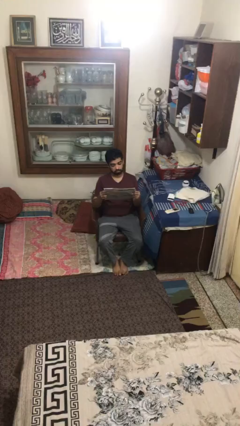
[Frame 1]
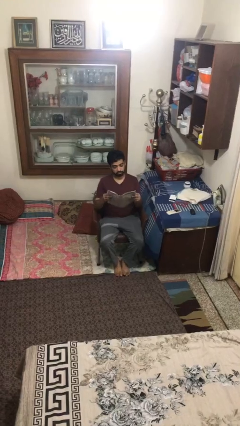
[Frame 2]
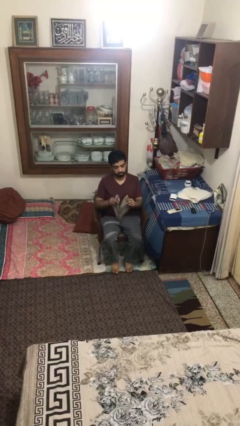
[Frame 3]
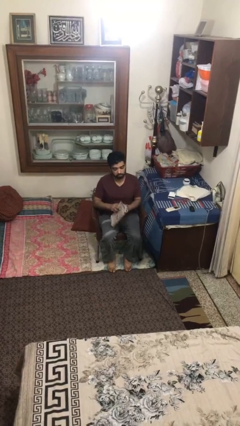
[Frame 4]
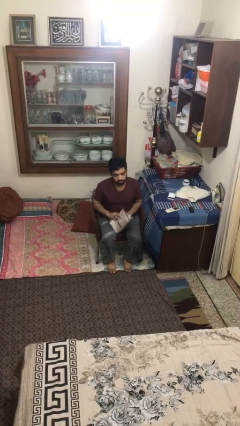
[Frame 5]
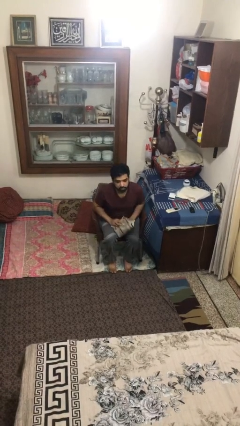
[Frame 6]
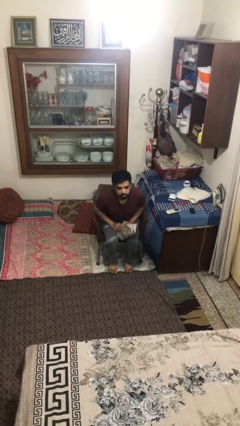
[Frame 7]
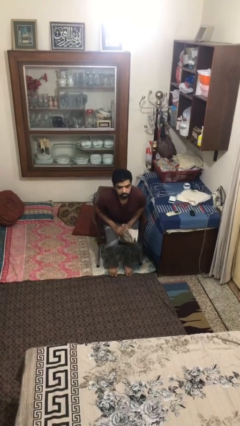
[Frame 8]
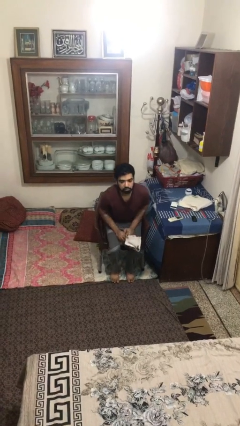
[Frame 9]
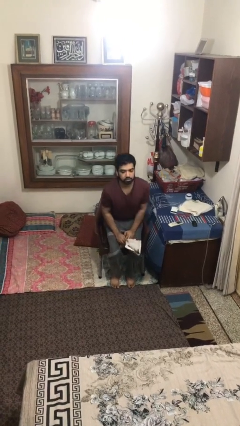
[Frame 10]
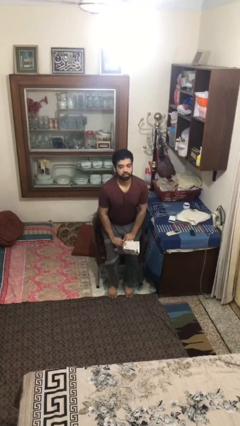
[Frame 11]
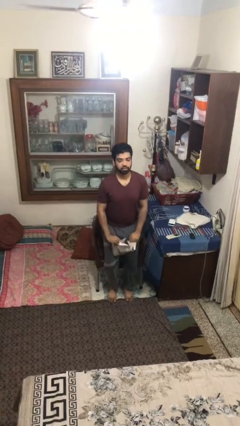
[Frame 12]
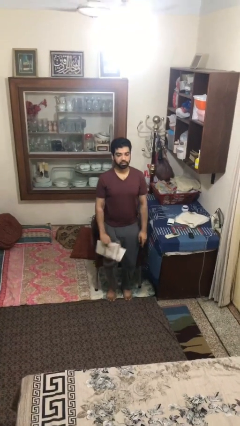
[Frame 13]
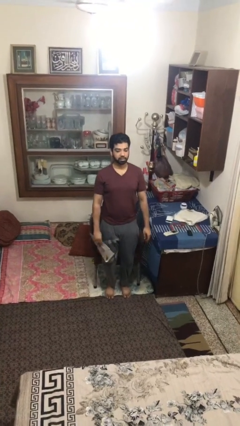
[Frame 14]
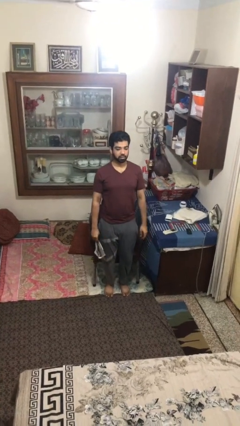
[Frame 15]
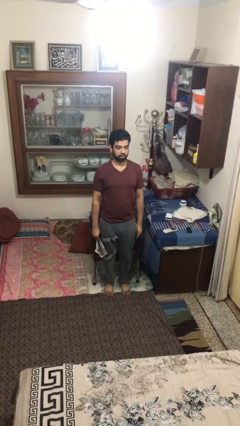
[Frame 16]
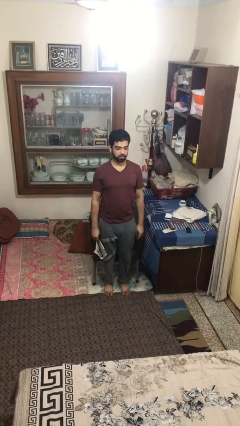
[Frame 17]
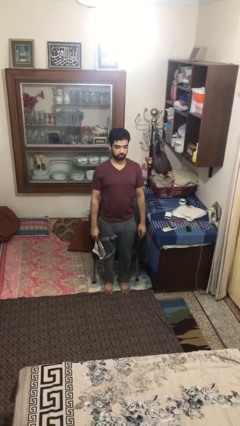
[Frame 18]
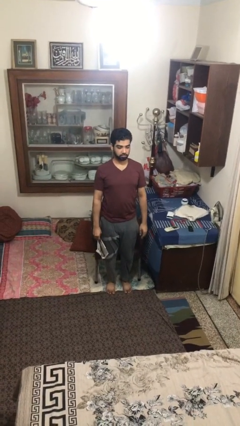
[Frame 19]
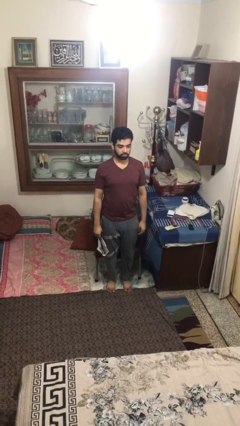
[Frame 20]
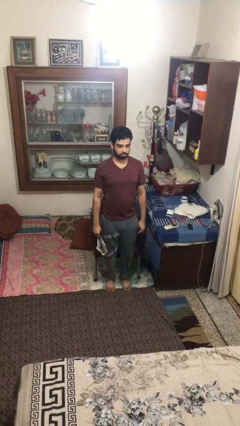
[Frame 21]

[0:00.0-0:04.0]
person stands up

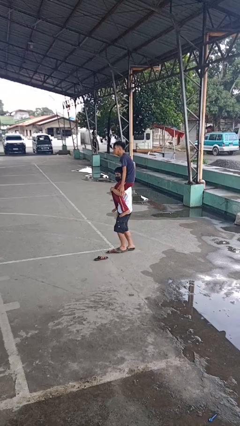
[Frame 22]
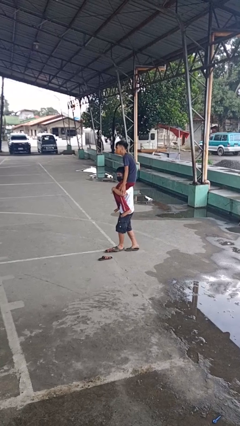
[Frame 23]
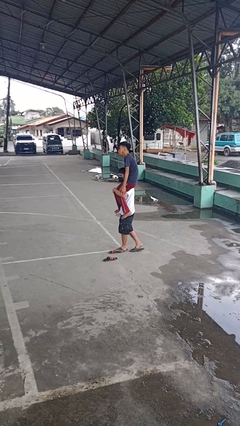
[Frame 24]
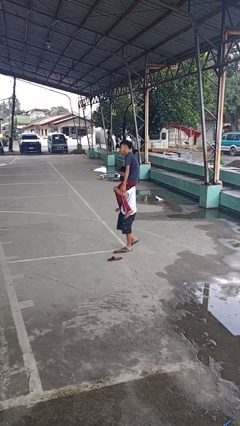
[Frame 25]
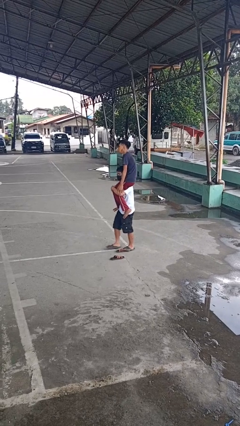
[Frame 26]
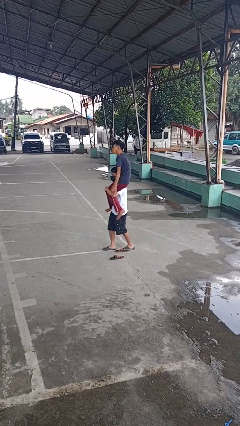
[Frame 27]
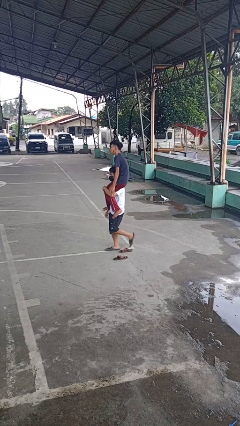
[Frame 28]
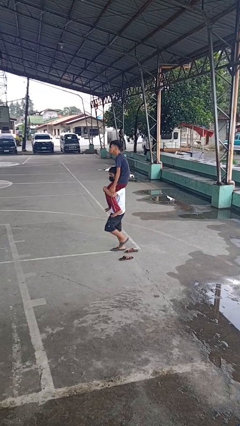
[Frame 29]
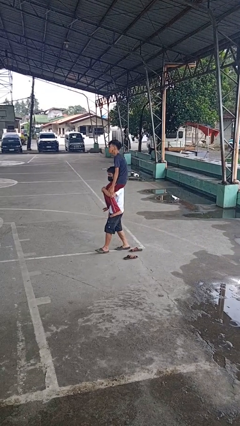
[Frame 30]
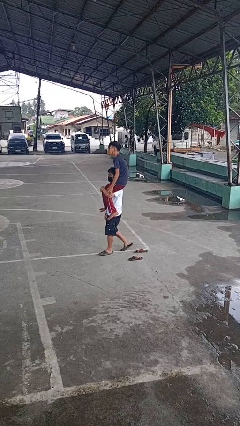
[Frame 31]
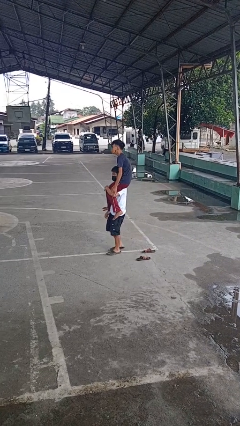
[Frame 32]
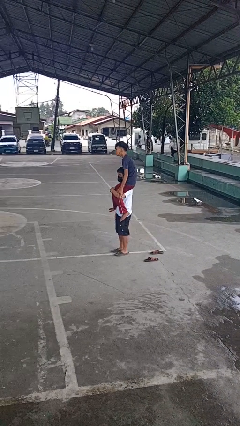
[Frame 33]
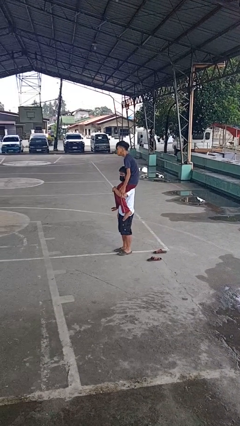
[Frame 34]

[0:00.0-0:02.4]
person carries person on shoulders

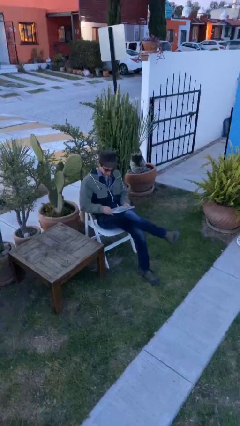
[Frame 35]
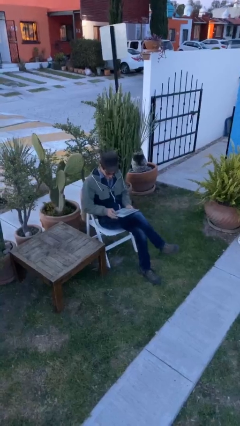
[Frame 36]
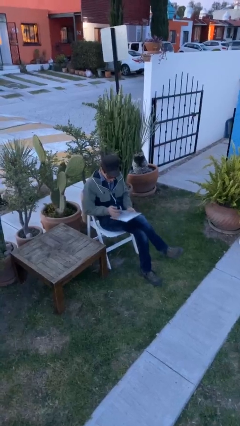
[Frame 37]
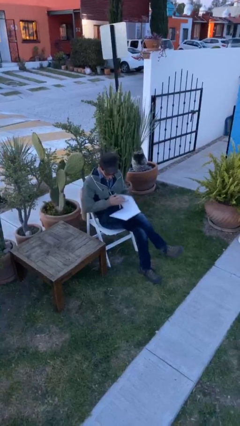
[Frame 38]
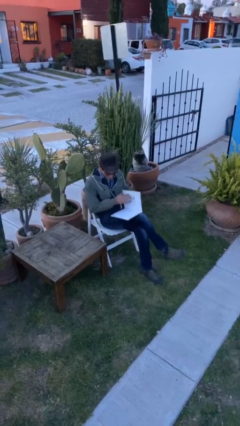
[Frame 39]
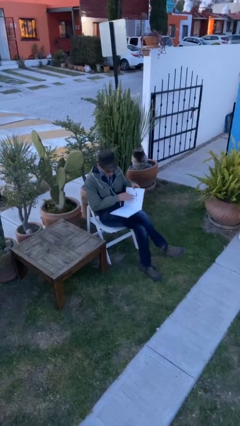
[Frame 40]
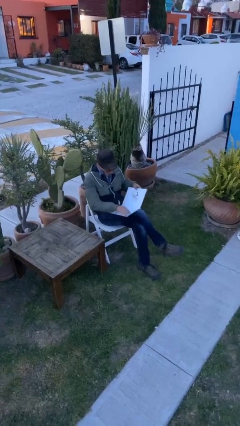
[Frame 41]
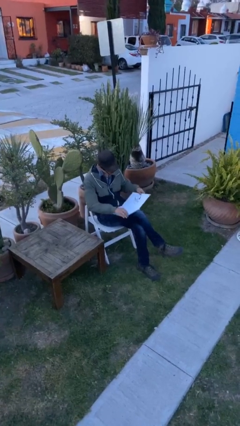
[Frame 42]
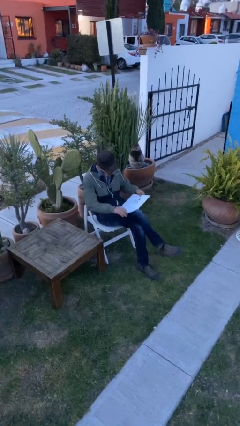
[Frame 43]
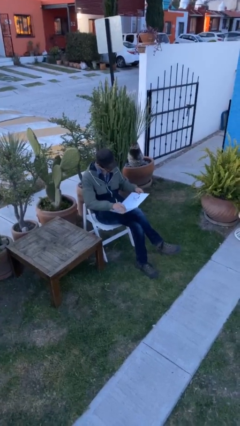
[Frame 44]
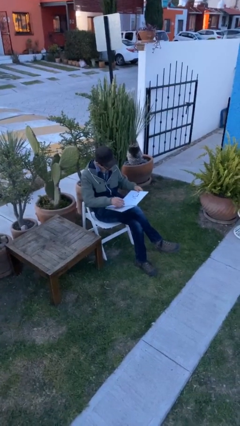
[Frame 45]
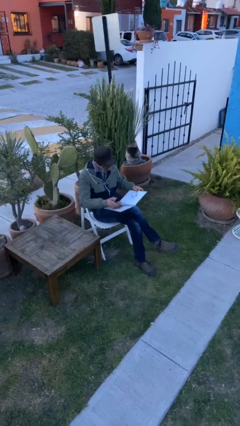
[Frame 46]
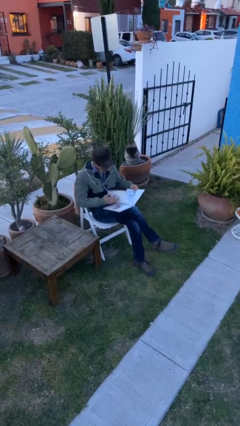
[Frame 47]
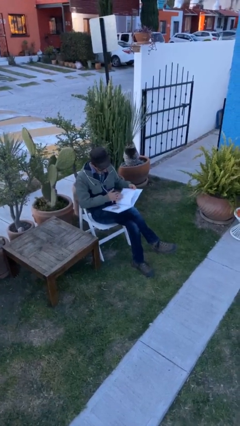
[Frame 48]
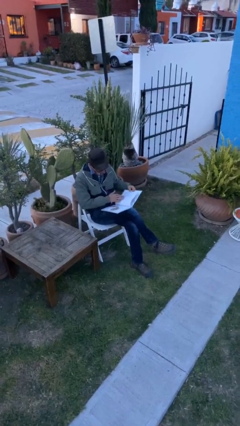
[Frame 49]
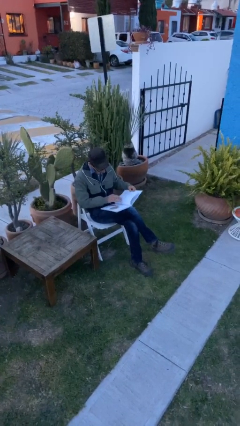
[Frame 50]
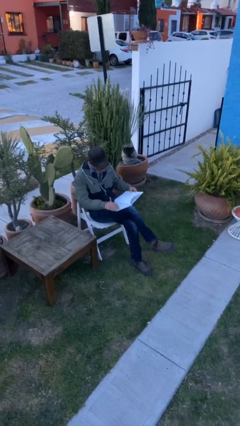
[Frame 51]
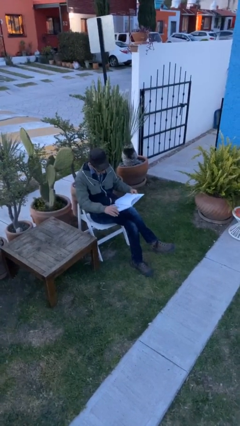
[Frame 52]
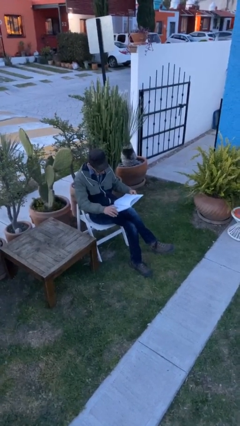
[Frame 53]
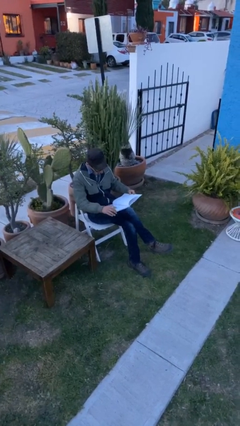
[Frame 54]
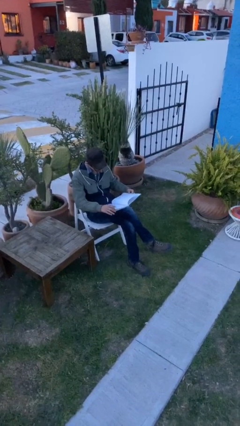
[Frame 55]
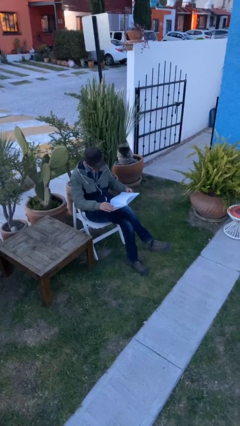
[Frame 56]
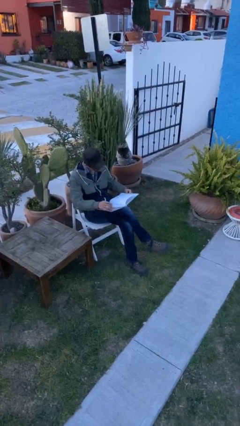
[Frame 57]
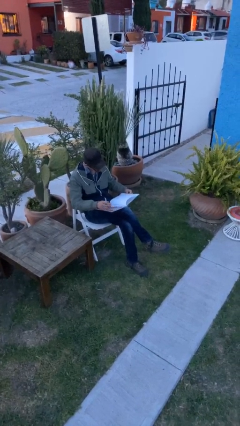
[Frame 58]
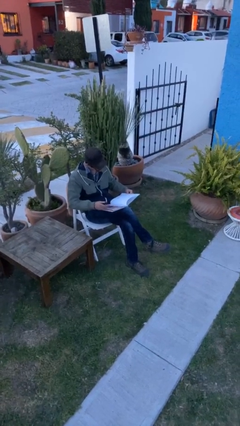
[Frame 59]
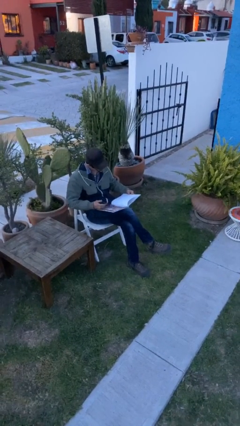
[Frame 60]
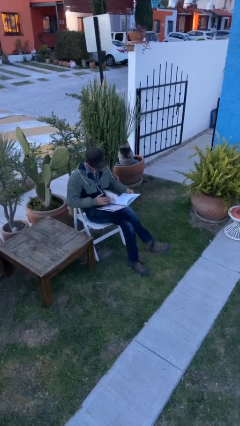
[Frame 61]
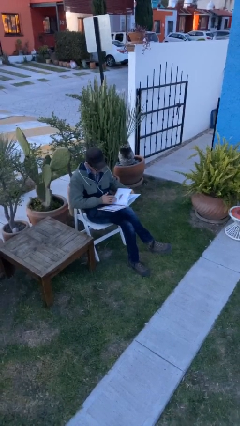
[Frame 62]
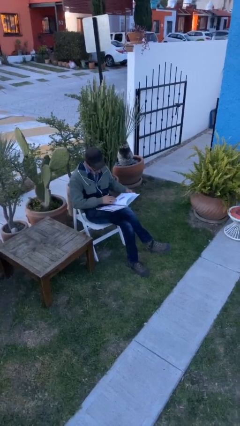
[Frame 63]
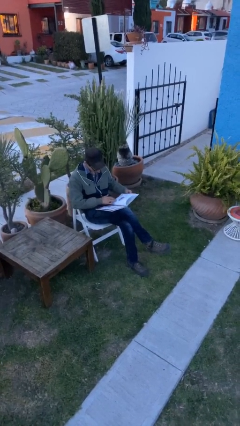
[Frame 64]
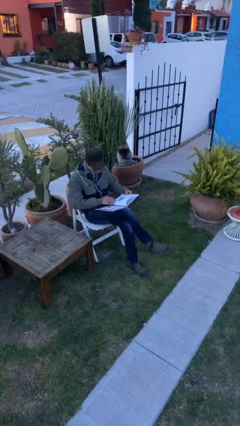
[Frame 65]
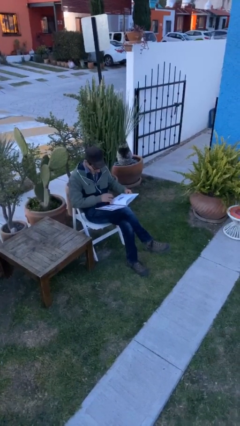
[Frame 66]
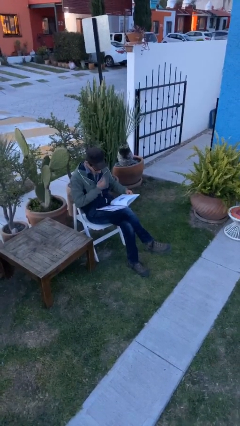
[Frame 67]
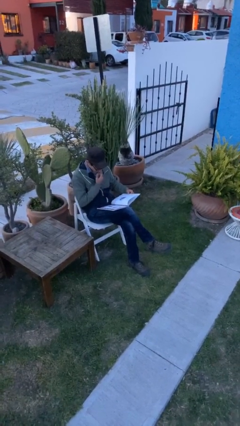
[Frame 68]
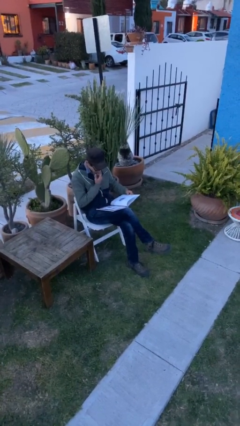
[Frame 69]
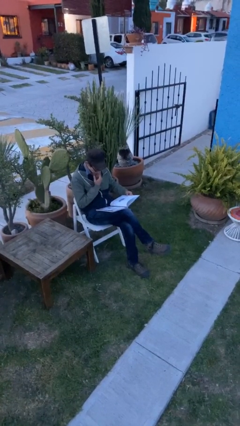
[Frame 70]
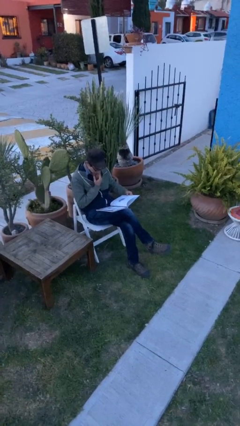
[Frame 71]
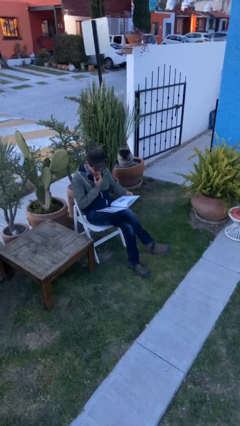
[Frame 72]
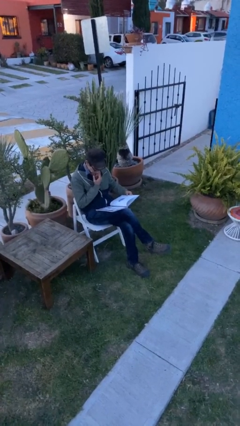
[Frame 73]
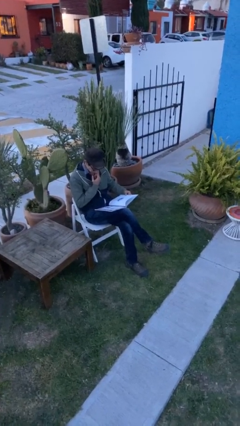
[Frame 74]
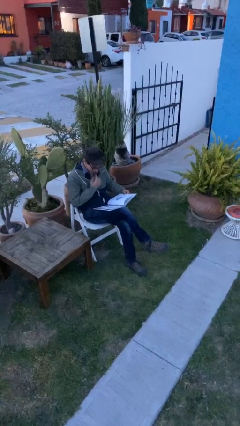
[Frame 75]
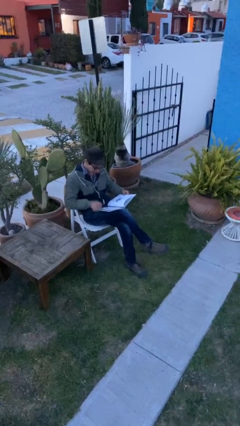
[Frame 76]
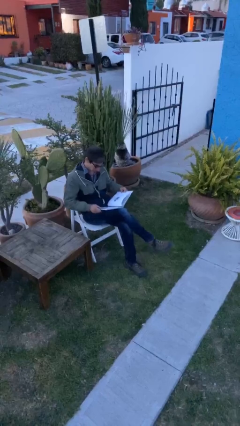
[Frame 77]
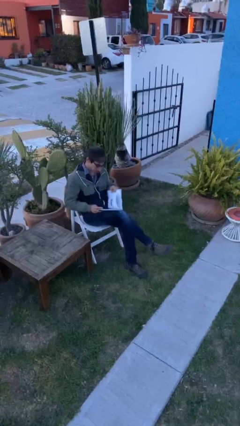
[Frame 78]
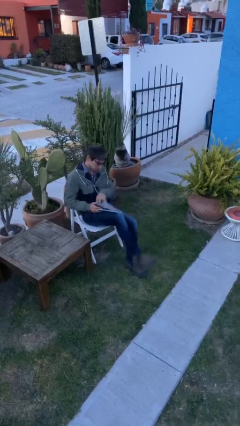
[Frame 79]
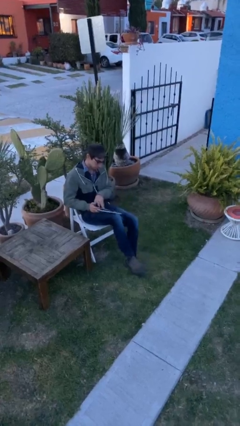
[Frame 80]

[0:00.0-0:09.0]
person reads document

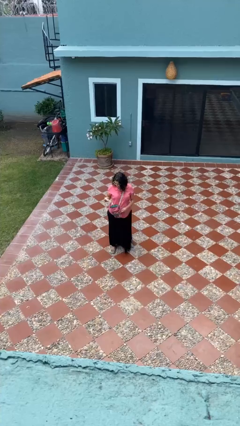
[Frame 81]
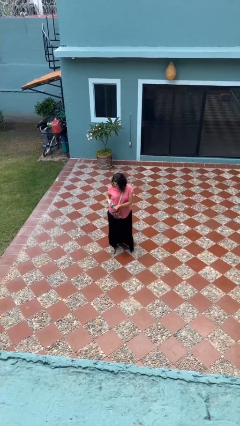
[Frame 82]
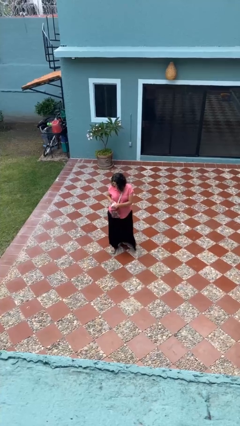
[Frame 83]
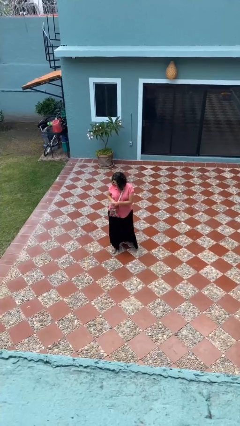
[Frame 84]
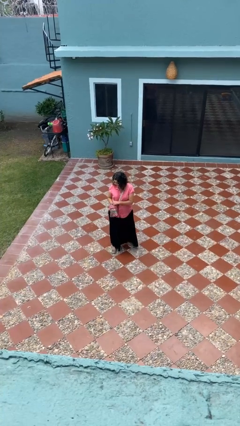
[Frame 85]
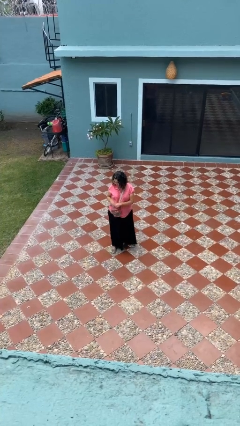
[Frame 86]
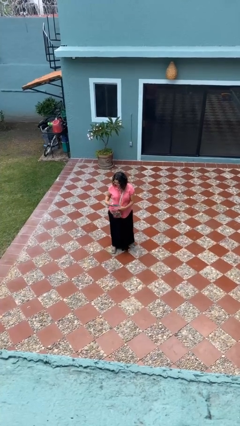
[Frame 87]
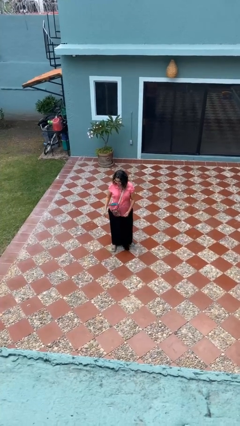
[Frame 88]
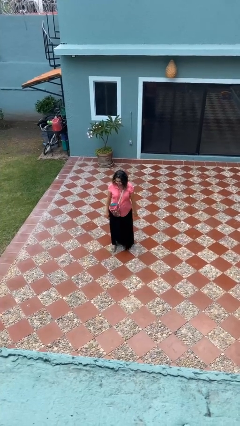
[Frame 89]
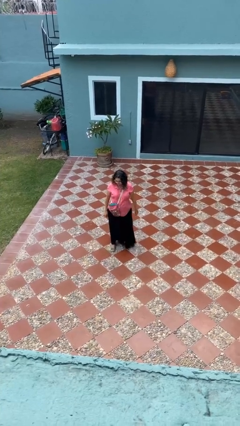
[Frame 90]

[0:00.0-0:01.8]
person puts object into purse

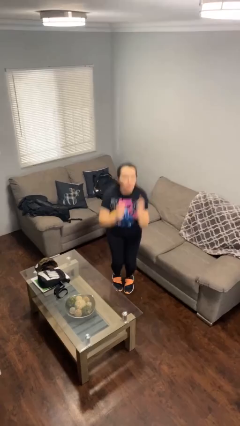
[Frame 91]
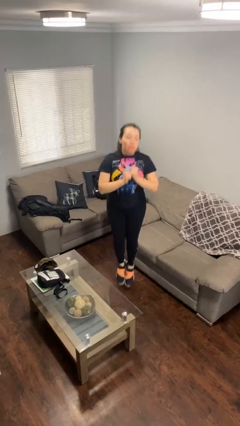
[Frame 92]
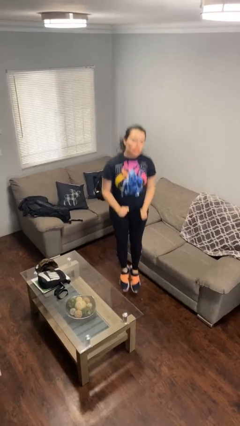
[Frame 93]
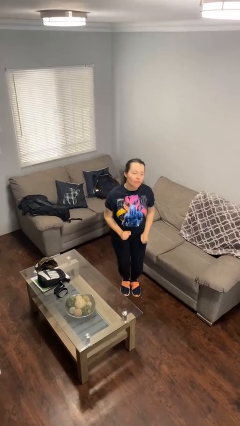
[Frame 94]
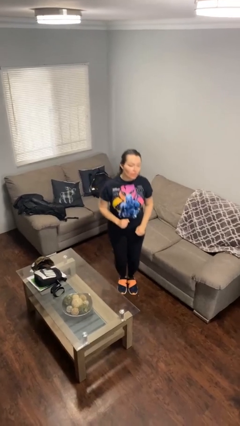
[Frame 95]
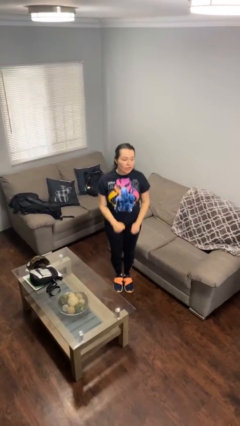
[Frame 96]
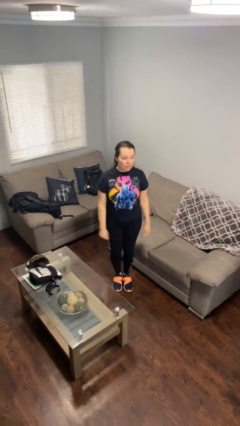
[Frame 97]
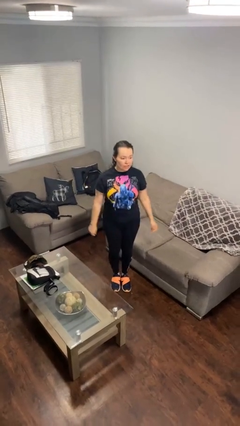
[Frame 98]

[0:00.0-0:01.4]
person jumps
